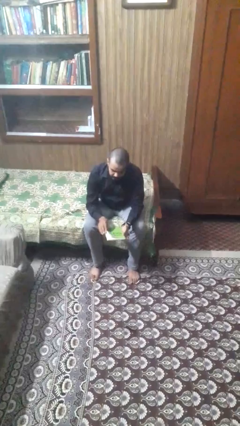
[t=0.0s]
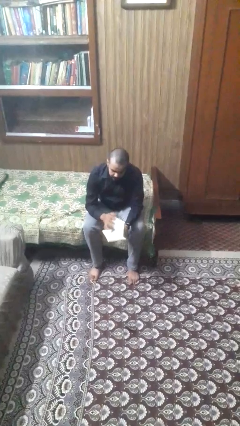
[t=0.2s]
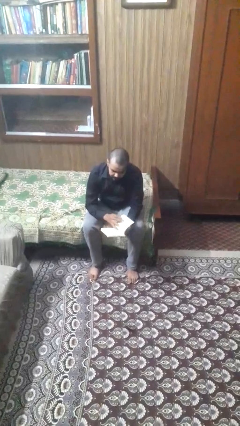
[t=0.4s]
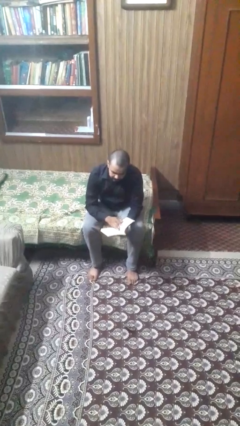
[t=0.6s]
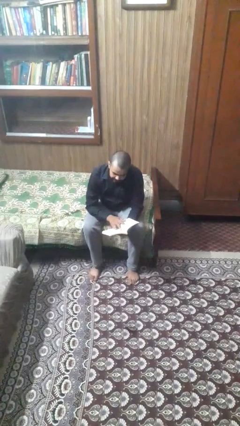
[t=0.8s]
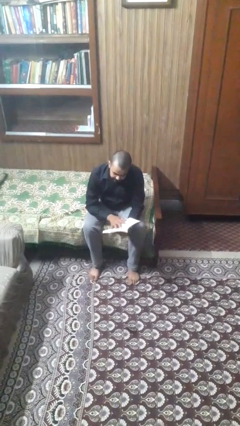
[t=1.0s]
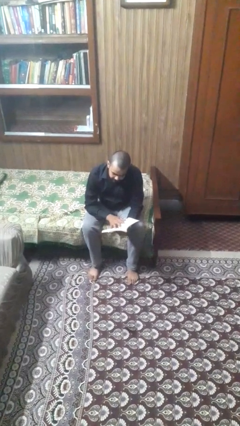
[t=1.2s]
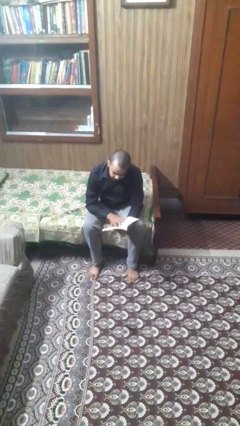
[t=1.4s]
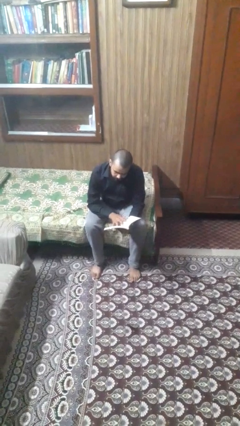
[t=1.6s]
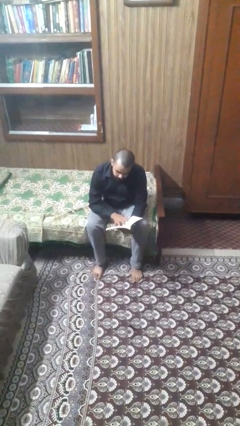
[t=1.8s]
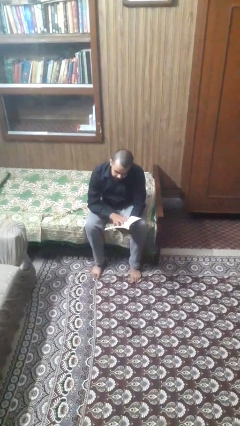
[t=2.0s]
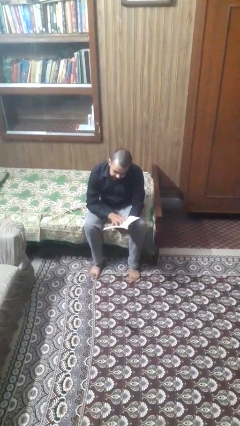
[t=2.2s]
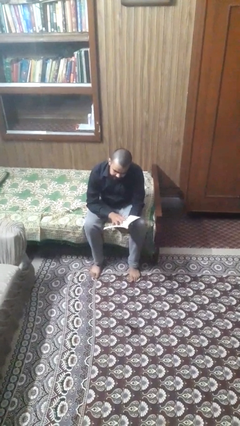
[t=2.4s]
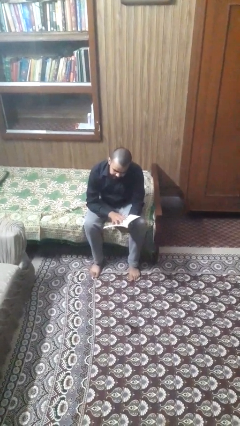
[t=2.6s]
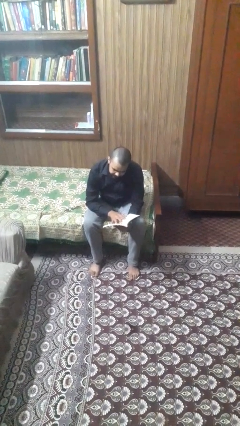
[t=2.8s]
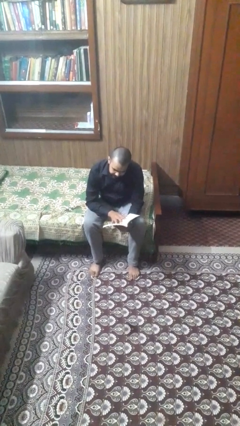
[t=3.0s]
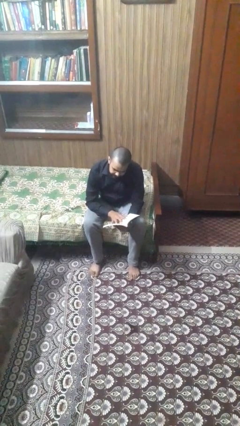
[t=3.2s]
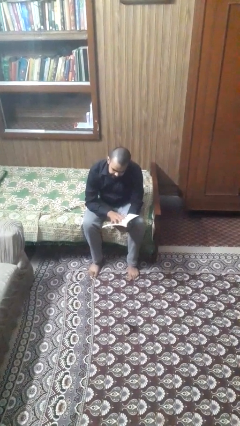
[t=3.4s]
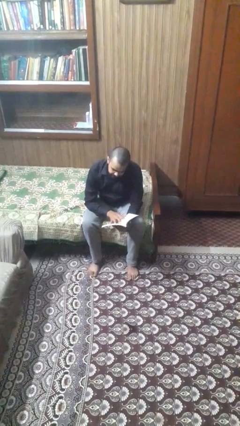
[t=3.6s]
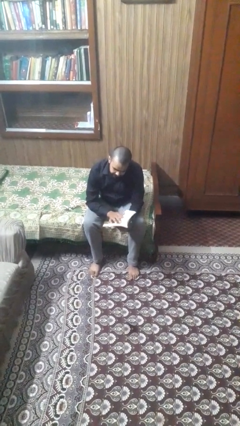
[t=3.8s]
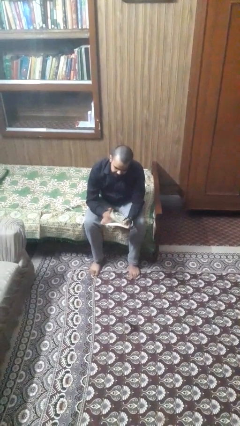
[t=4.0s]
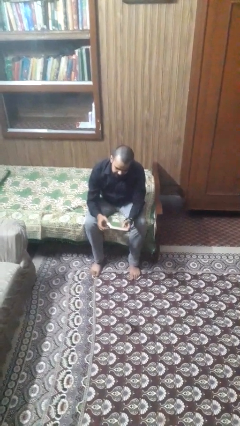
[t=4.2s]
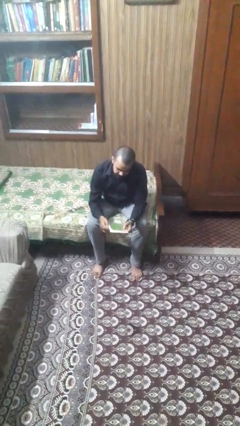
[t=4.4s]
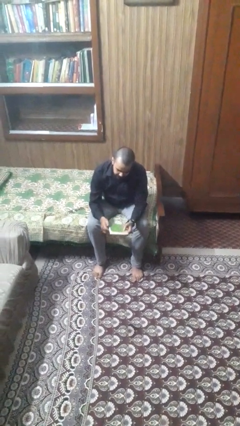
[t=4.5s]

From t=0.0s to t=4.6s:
person reads magazine

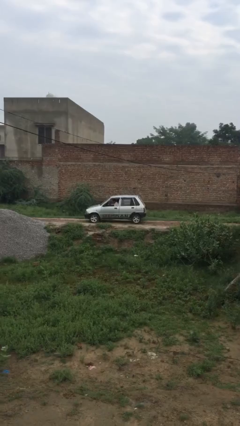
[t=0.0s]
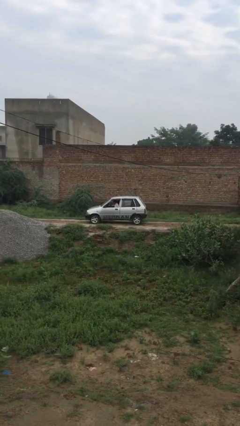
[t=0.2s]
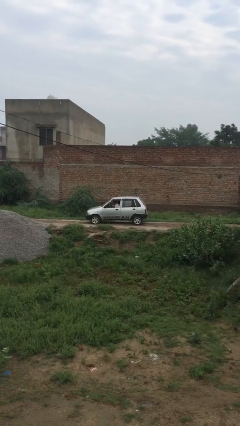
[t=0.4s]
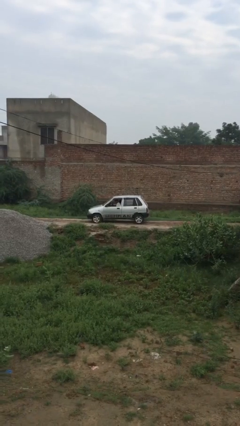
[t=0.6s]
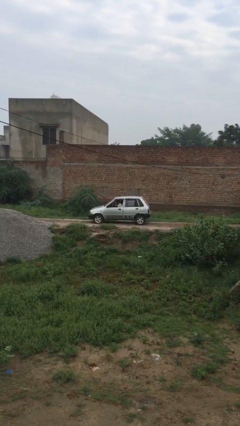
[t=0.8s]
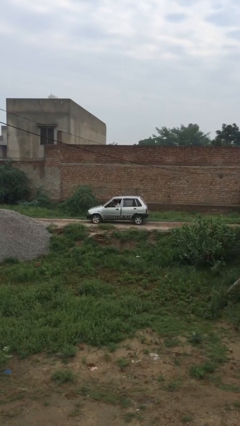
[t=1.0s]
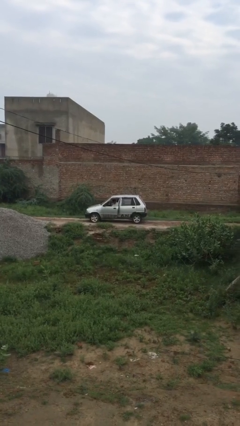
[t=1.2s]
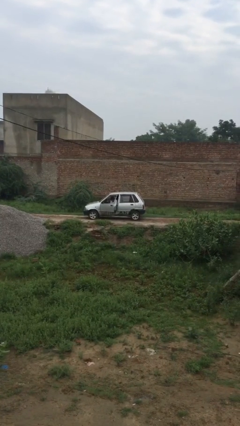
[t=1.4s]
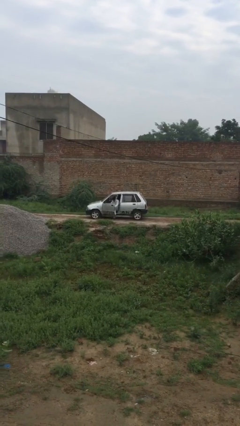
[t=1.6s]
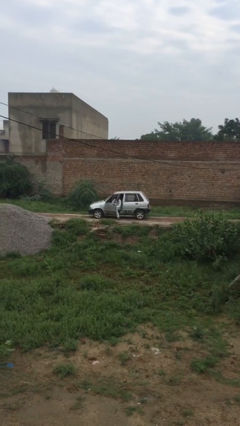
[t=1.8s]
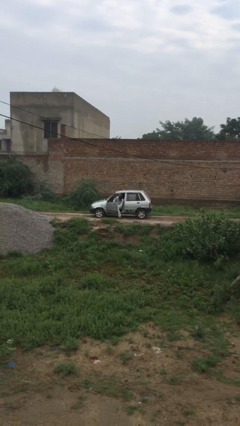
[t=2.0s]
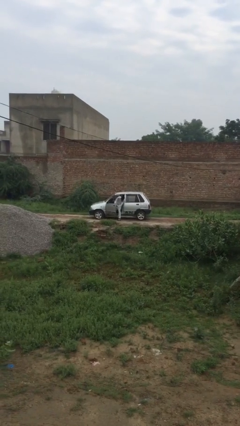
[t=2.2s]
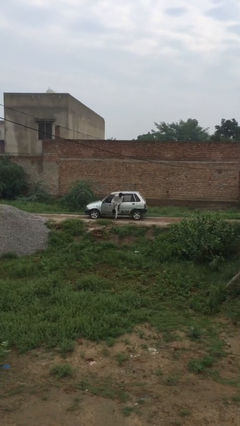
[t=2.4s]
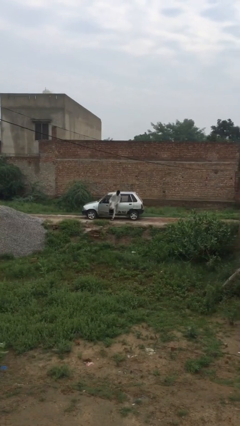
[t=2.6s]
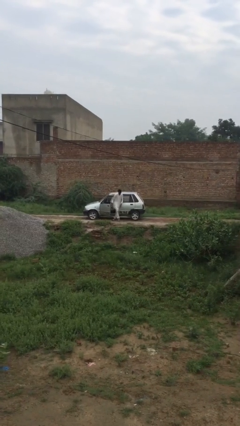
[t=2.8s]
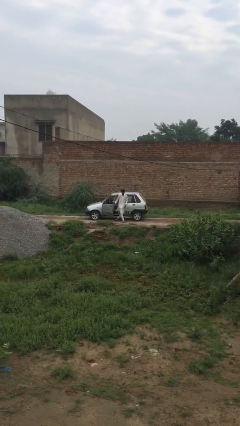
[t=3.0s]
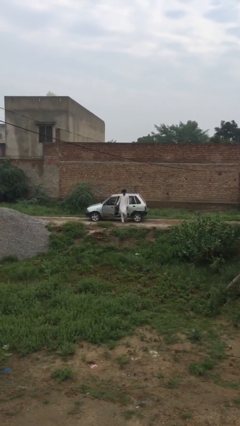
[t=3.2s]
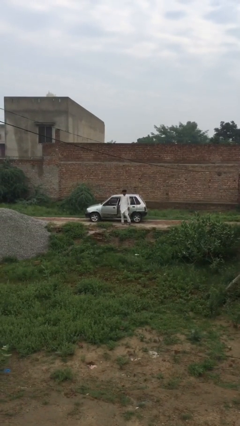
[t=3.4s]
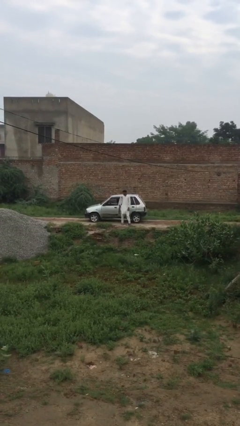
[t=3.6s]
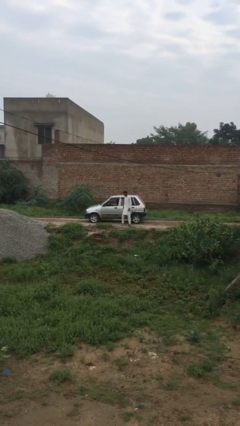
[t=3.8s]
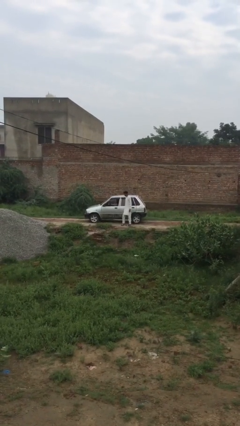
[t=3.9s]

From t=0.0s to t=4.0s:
car drops off person

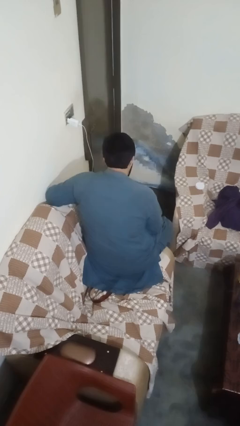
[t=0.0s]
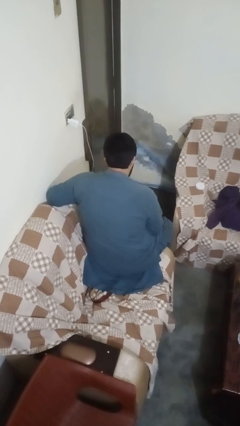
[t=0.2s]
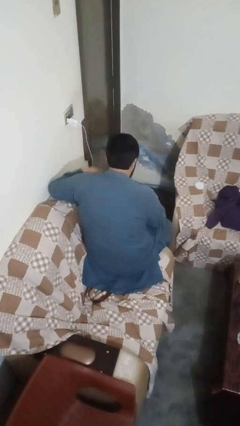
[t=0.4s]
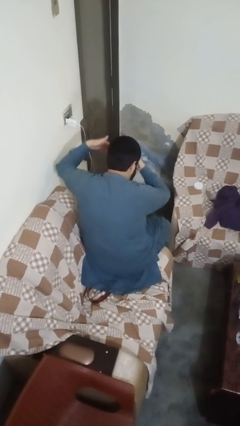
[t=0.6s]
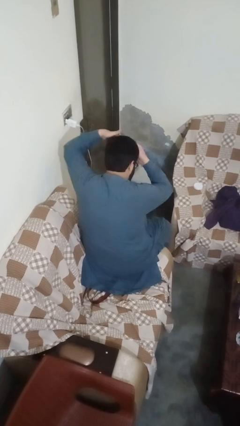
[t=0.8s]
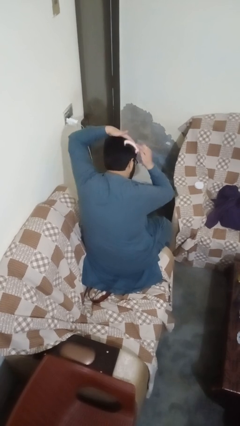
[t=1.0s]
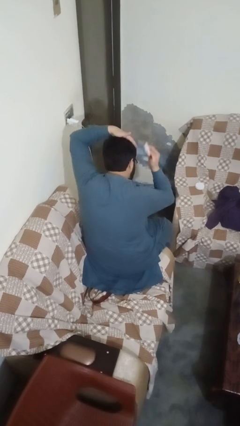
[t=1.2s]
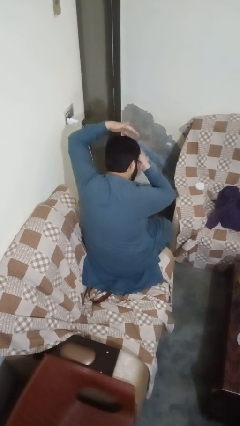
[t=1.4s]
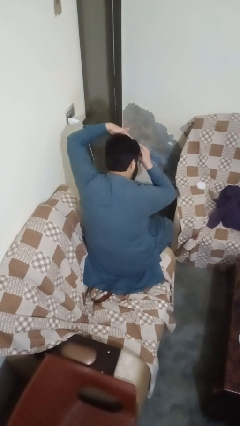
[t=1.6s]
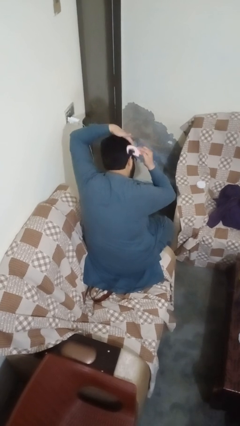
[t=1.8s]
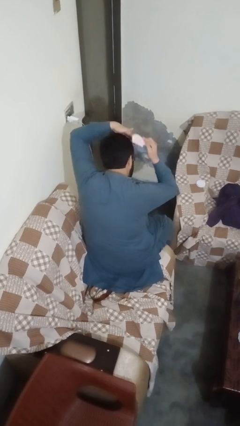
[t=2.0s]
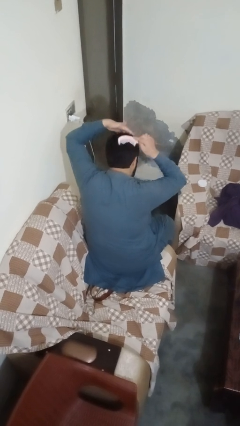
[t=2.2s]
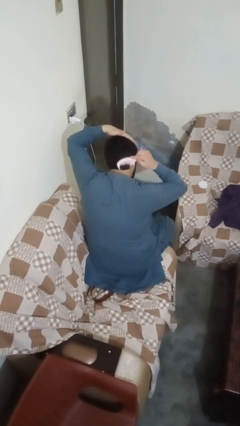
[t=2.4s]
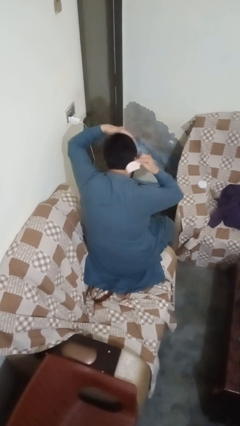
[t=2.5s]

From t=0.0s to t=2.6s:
person brushes hair

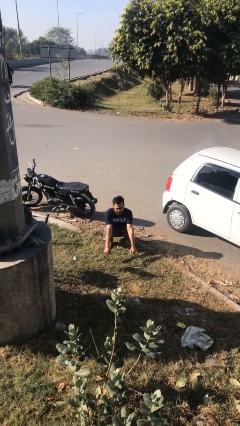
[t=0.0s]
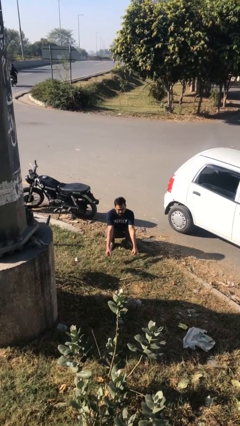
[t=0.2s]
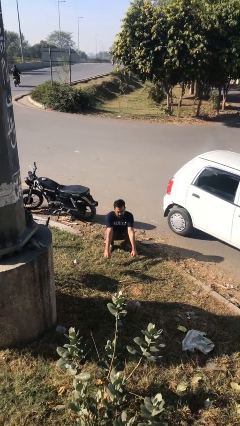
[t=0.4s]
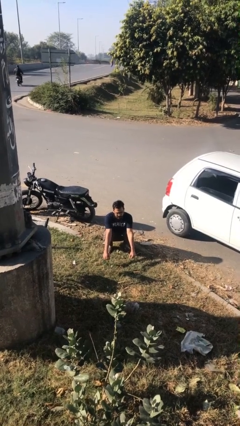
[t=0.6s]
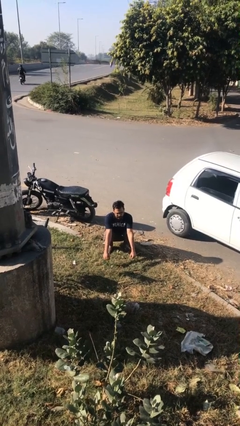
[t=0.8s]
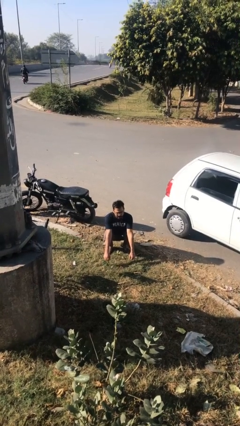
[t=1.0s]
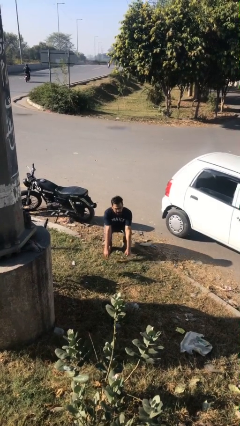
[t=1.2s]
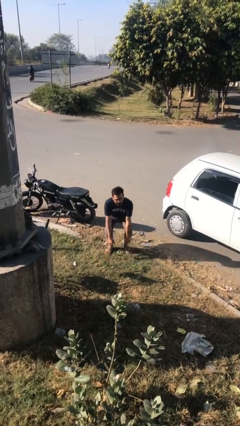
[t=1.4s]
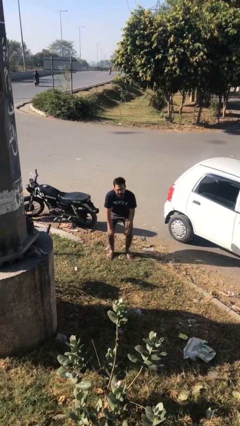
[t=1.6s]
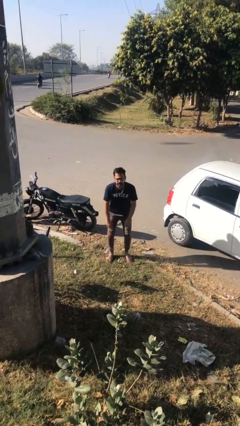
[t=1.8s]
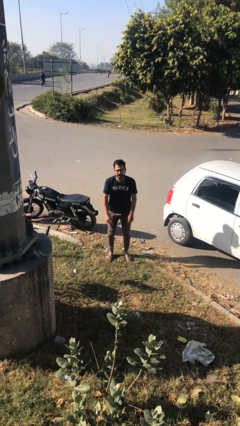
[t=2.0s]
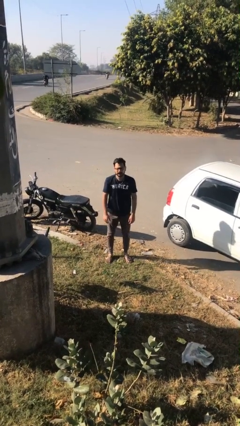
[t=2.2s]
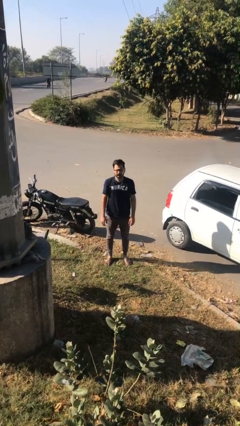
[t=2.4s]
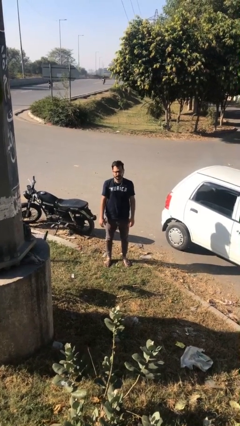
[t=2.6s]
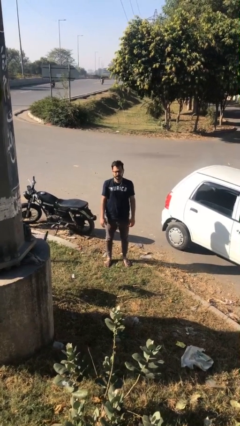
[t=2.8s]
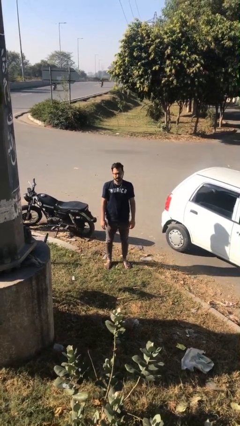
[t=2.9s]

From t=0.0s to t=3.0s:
person stands up

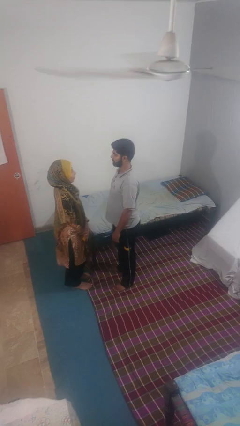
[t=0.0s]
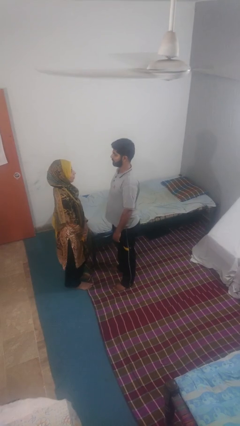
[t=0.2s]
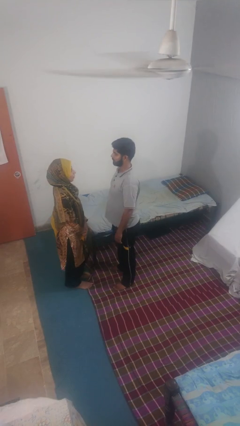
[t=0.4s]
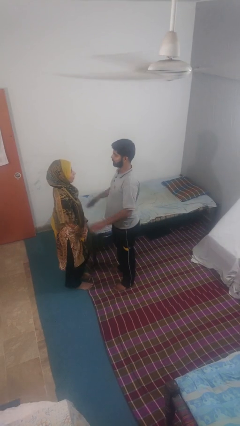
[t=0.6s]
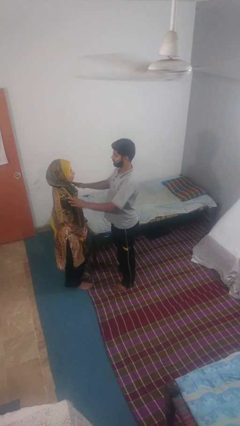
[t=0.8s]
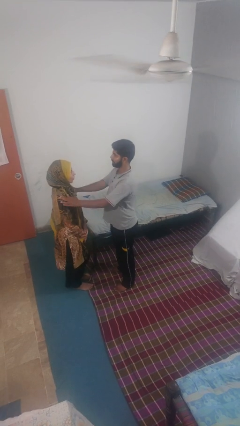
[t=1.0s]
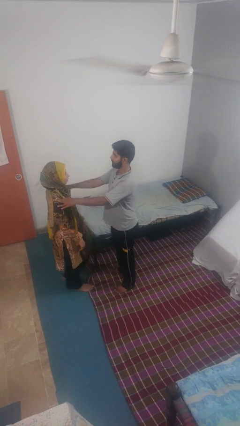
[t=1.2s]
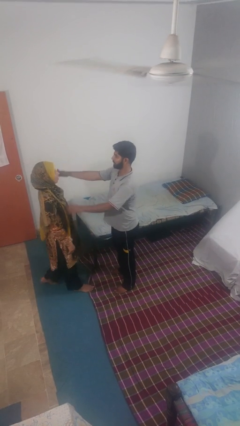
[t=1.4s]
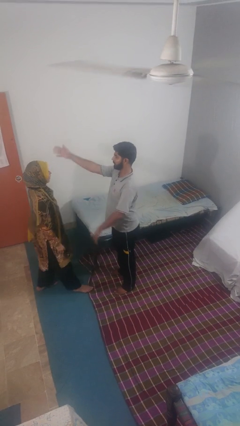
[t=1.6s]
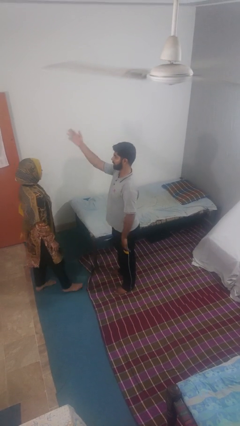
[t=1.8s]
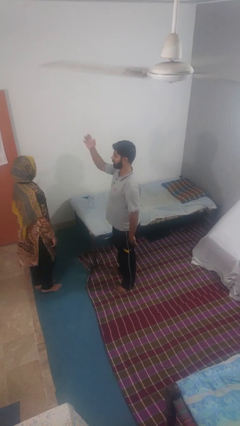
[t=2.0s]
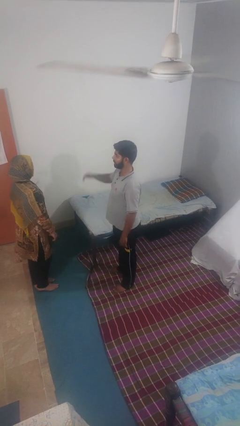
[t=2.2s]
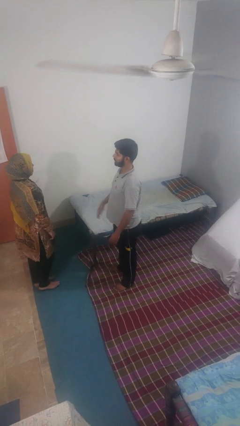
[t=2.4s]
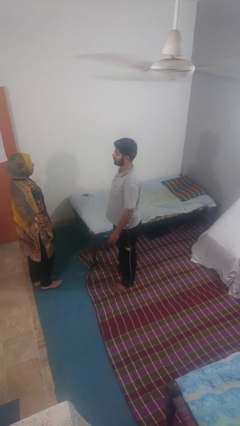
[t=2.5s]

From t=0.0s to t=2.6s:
person shoves person

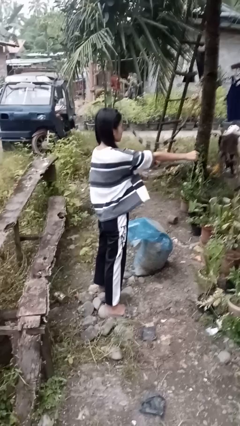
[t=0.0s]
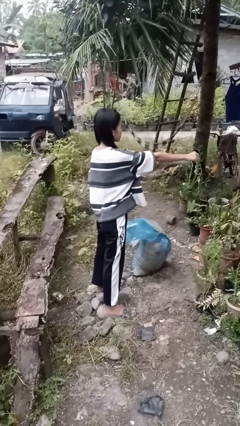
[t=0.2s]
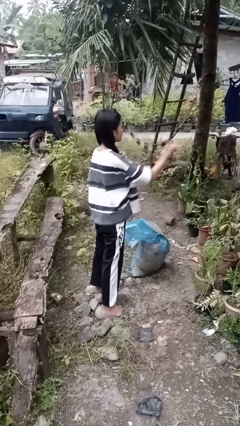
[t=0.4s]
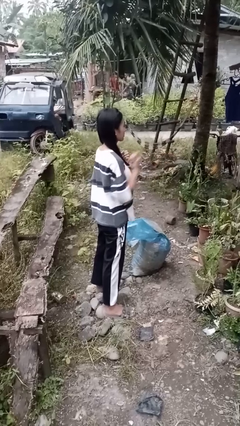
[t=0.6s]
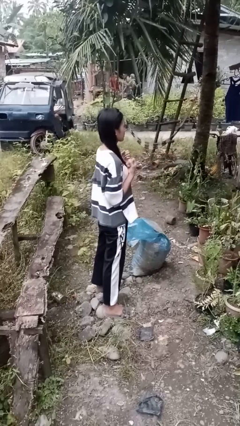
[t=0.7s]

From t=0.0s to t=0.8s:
person punches
